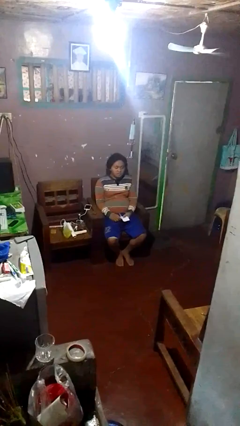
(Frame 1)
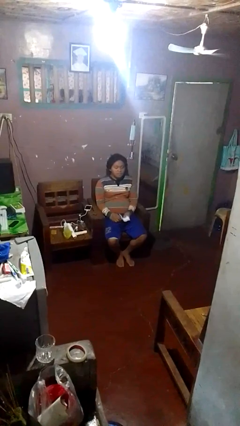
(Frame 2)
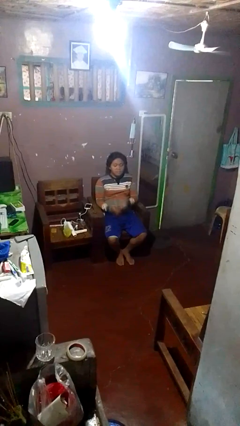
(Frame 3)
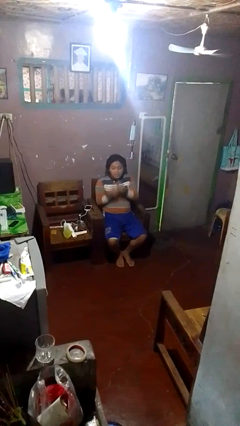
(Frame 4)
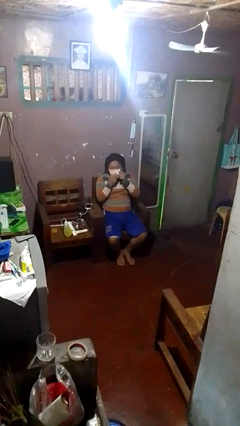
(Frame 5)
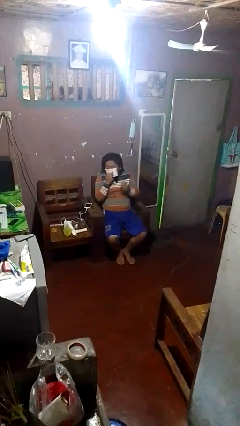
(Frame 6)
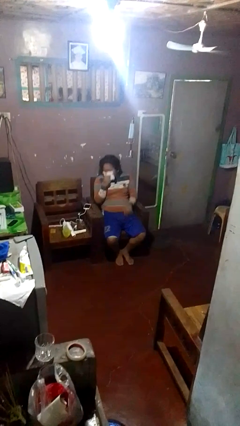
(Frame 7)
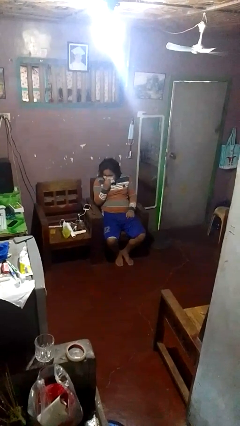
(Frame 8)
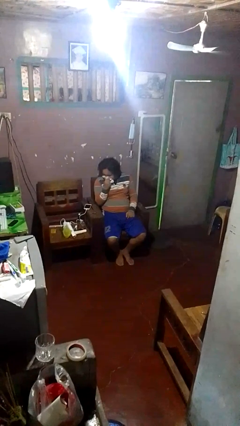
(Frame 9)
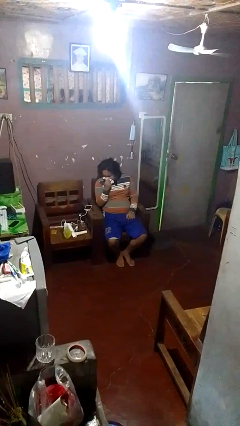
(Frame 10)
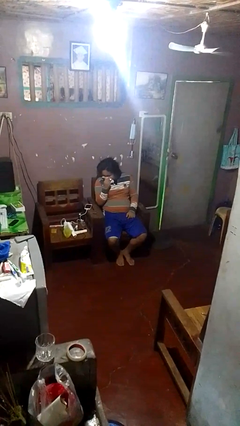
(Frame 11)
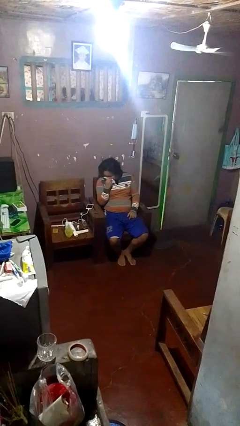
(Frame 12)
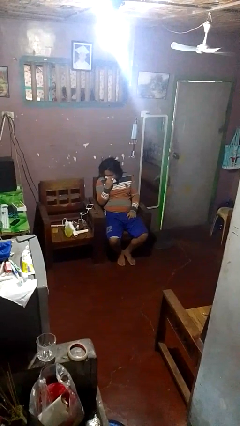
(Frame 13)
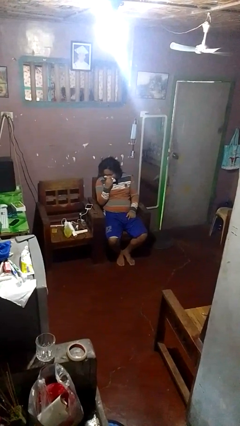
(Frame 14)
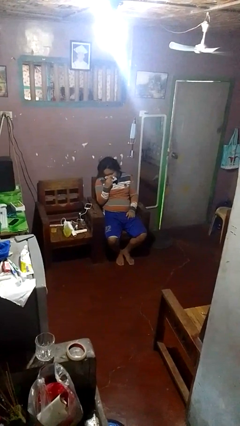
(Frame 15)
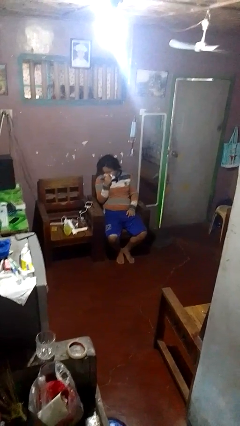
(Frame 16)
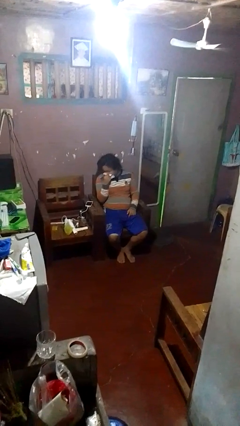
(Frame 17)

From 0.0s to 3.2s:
person blows nose

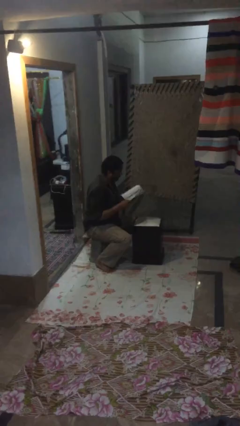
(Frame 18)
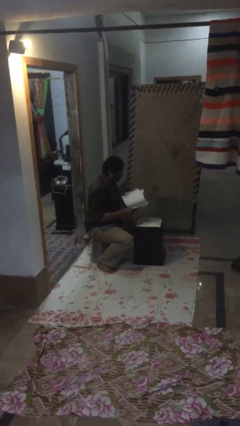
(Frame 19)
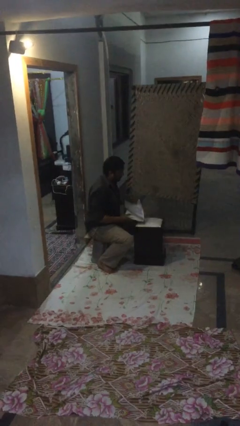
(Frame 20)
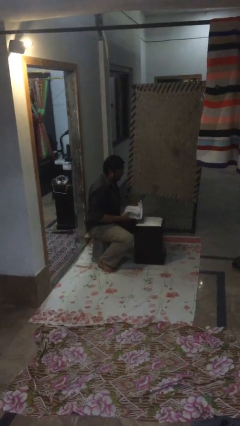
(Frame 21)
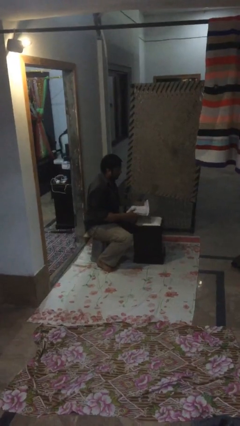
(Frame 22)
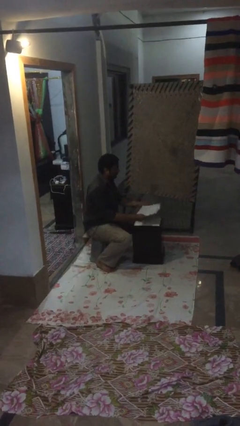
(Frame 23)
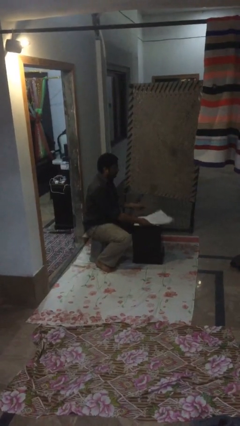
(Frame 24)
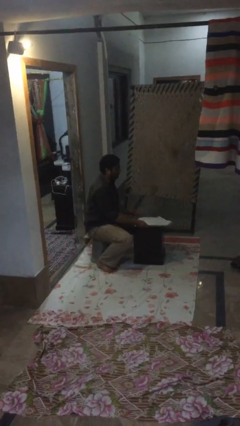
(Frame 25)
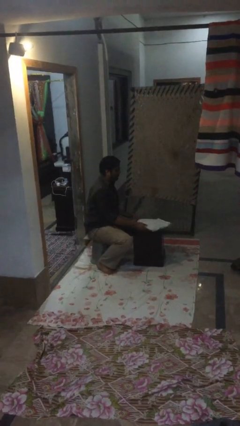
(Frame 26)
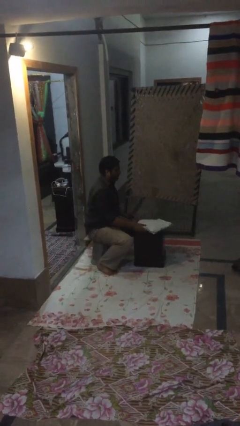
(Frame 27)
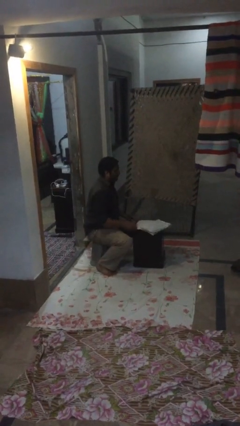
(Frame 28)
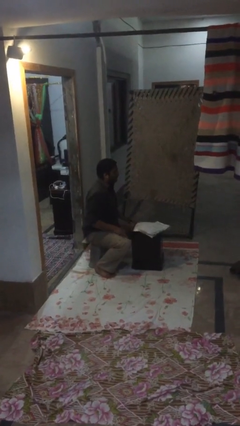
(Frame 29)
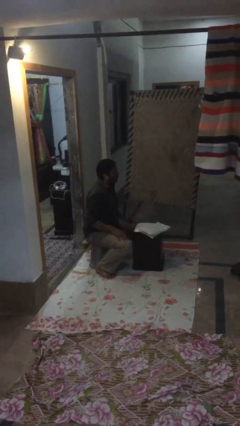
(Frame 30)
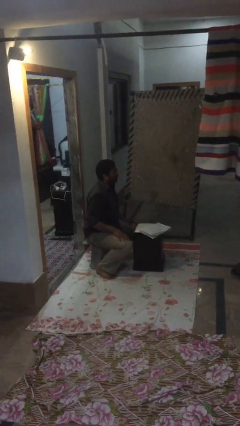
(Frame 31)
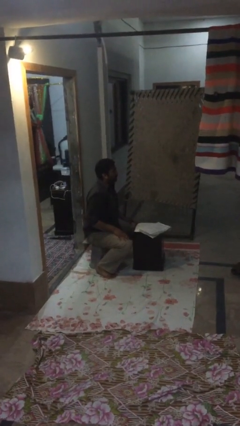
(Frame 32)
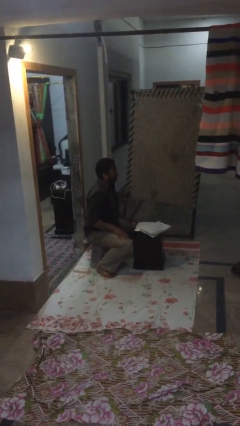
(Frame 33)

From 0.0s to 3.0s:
person puts down object on table

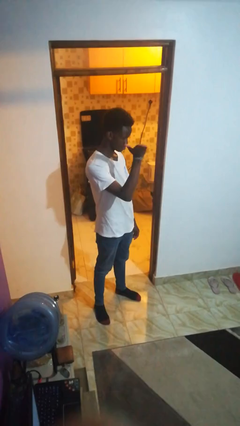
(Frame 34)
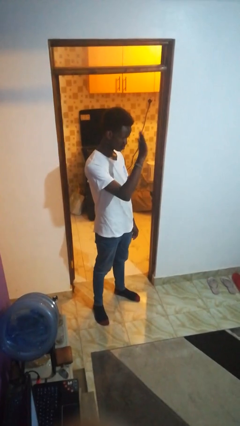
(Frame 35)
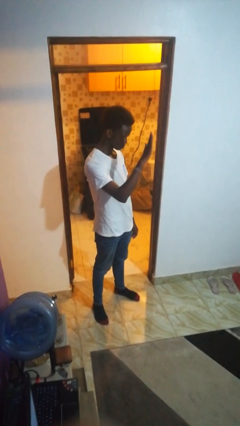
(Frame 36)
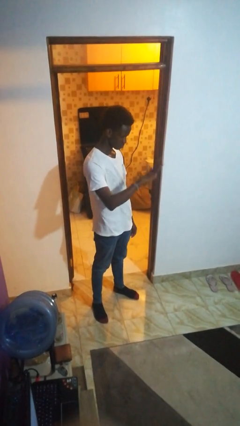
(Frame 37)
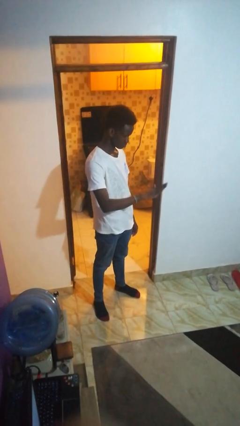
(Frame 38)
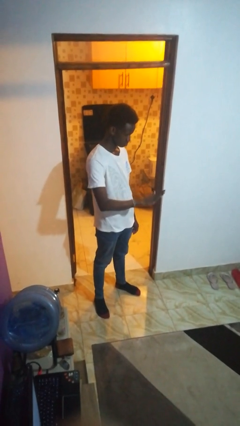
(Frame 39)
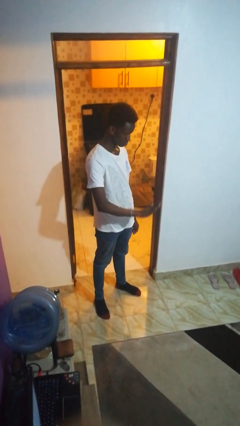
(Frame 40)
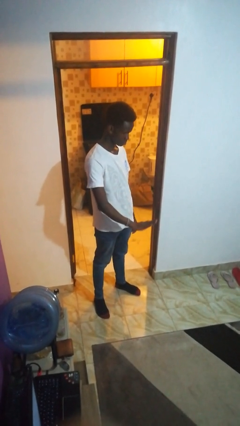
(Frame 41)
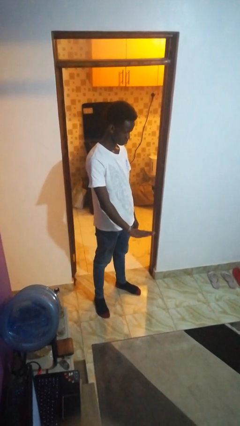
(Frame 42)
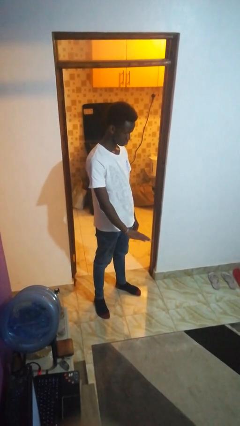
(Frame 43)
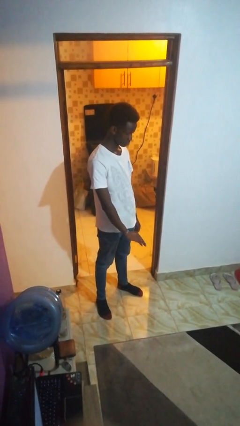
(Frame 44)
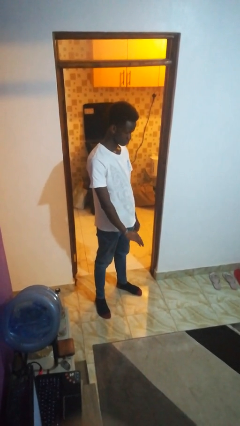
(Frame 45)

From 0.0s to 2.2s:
person gestures swipe down

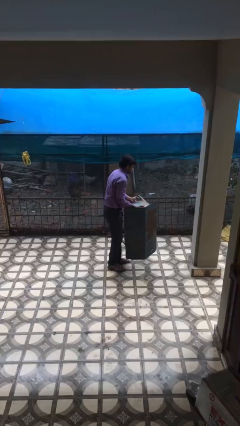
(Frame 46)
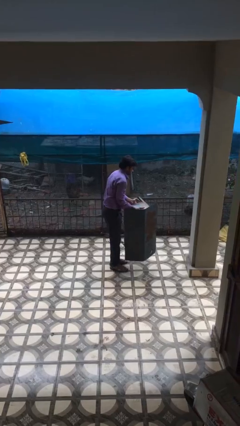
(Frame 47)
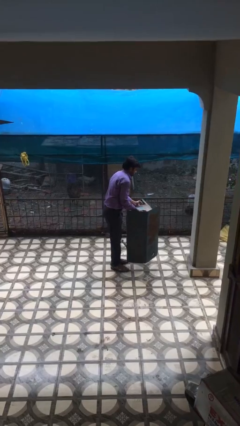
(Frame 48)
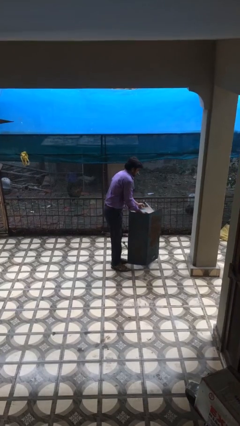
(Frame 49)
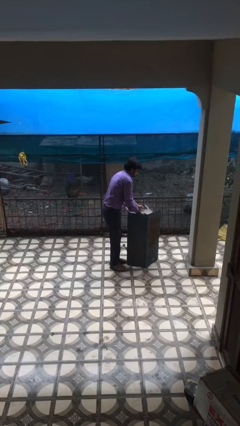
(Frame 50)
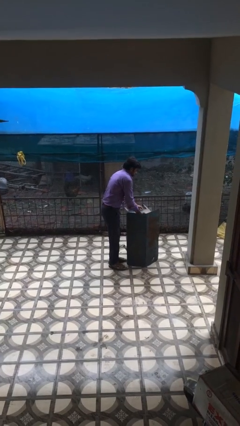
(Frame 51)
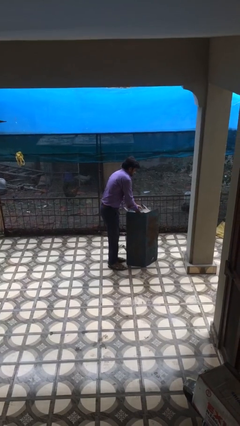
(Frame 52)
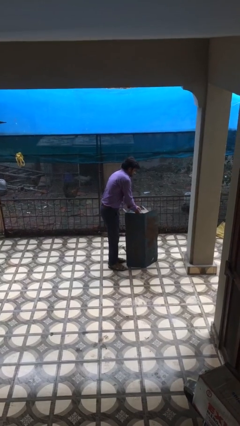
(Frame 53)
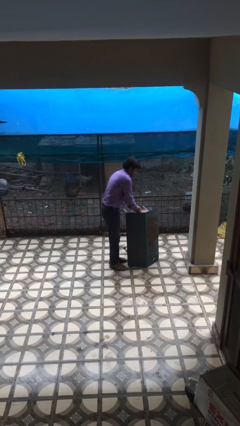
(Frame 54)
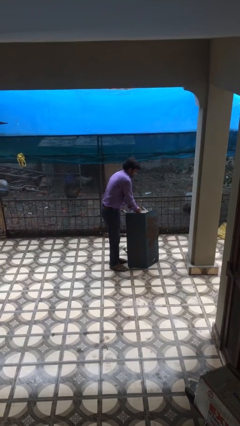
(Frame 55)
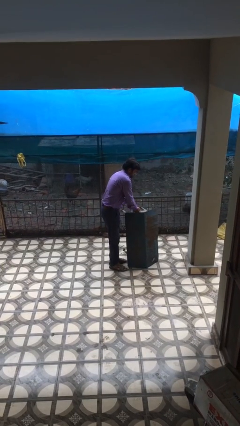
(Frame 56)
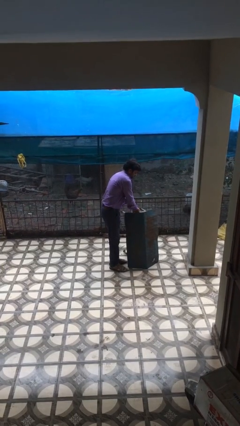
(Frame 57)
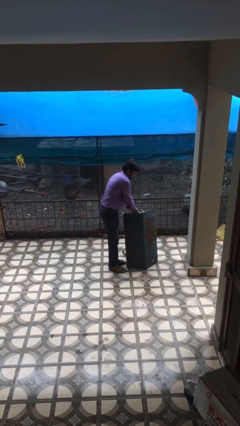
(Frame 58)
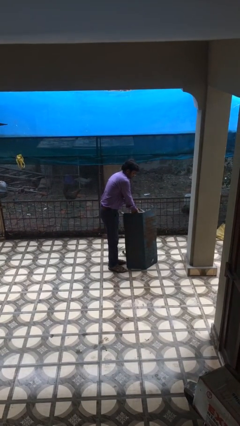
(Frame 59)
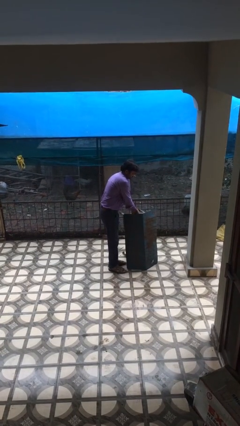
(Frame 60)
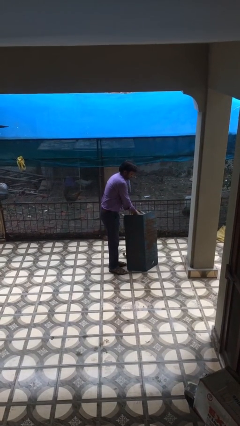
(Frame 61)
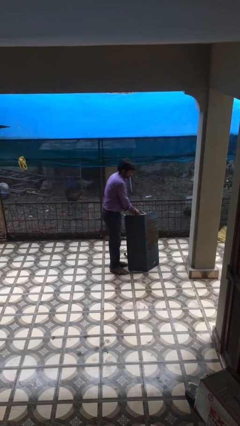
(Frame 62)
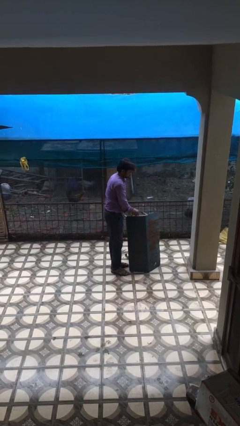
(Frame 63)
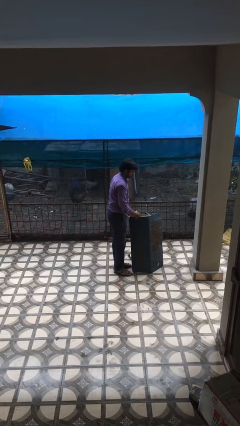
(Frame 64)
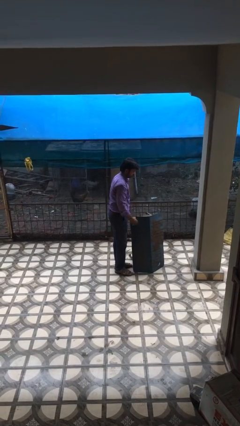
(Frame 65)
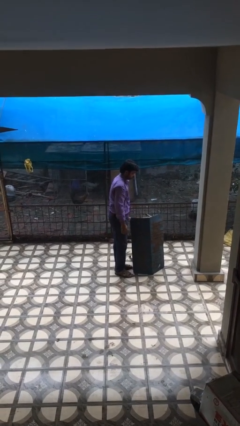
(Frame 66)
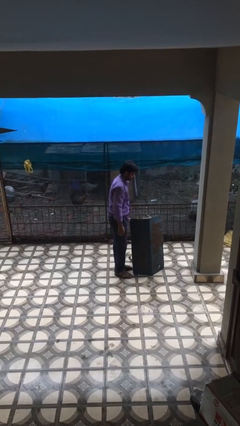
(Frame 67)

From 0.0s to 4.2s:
person puts down object on floor

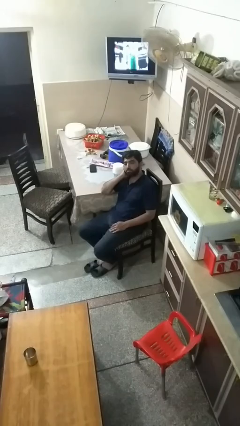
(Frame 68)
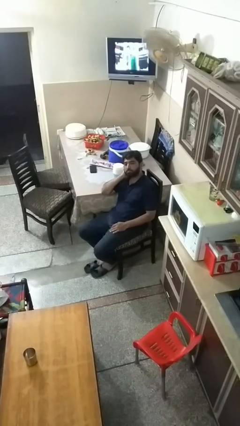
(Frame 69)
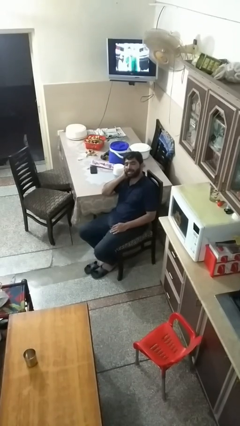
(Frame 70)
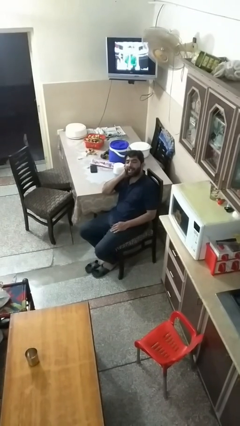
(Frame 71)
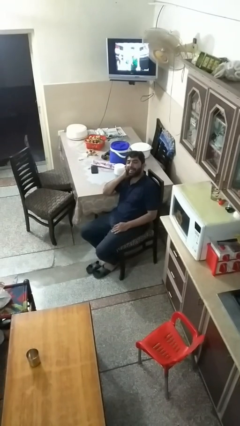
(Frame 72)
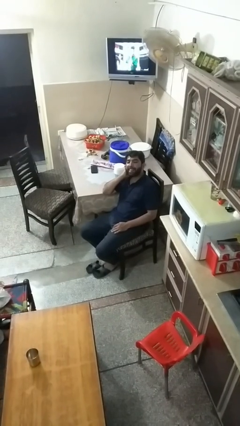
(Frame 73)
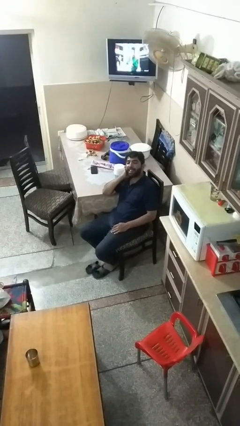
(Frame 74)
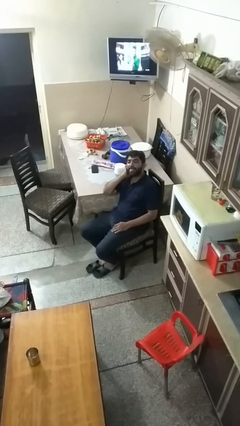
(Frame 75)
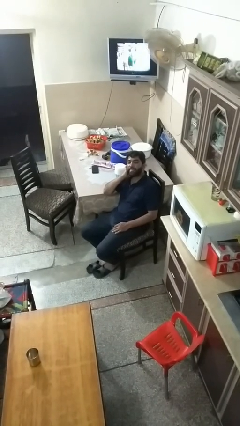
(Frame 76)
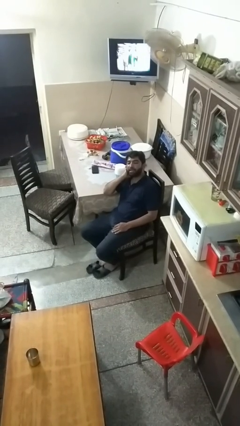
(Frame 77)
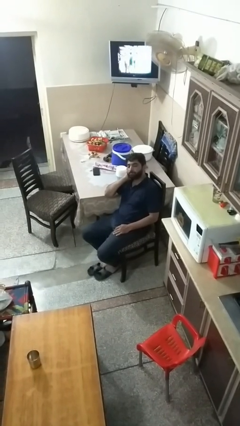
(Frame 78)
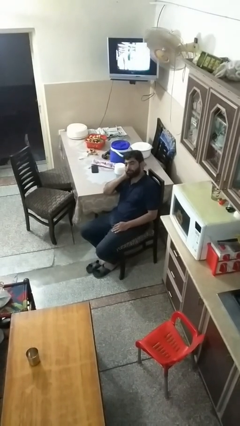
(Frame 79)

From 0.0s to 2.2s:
person sticks out tongue

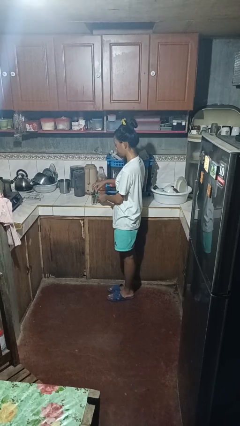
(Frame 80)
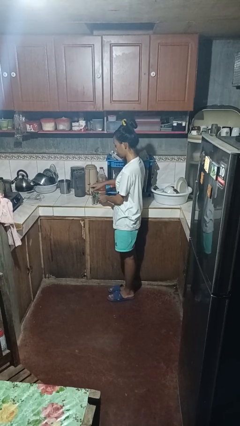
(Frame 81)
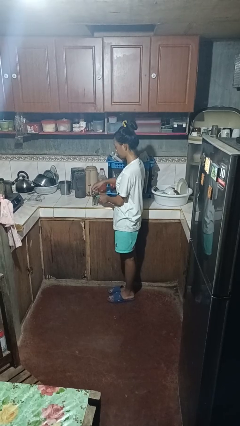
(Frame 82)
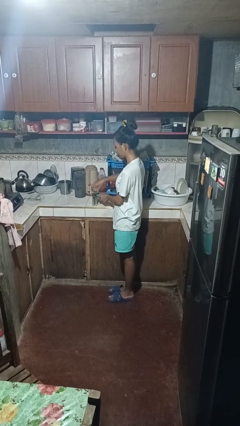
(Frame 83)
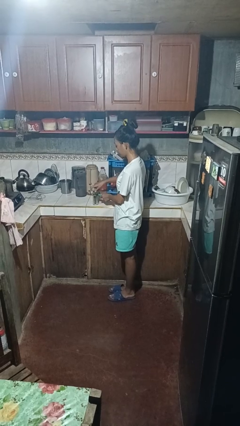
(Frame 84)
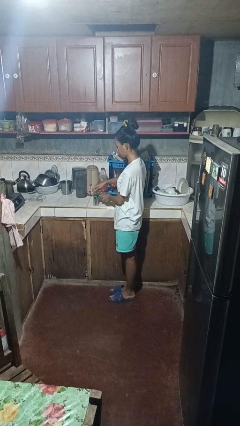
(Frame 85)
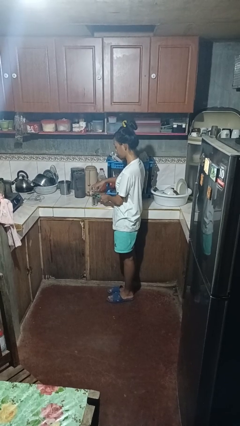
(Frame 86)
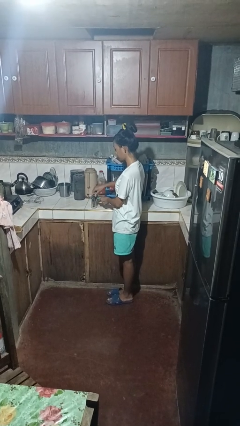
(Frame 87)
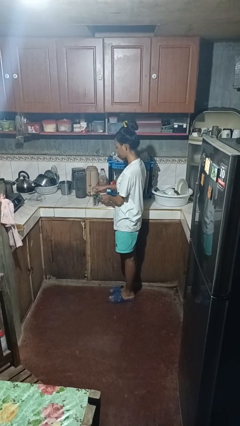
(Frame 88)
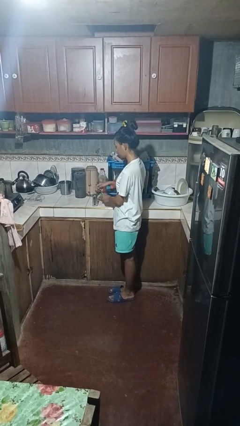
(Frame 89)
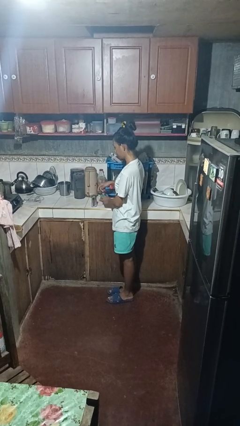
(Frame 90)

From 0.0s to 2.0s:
person opens can with can opener

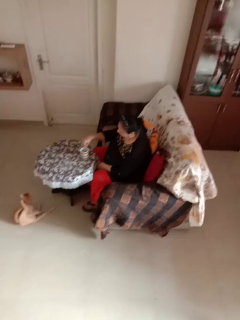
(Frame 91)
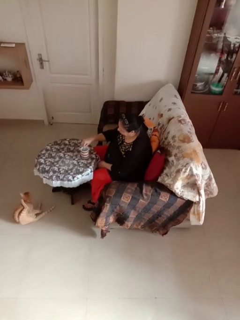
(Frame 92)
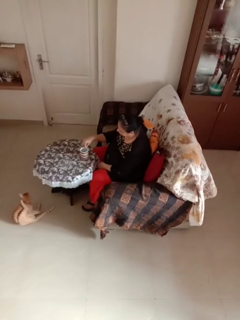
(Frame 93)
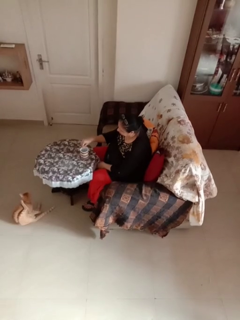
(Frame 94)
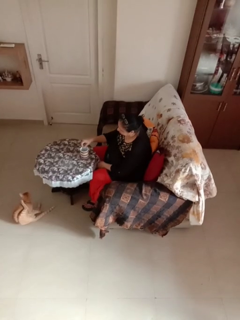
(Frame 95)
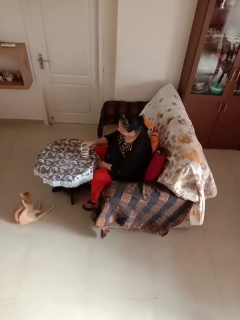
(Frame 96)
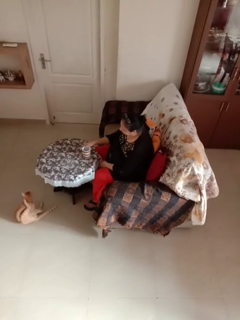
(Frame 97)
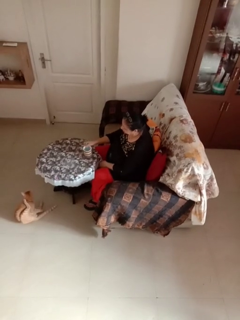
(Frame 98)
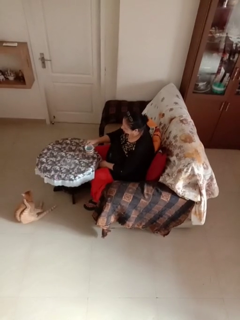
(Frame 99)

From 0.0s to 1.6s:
person stirs mug
